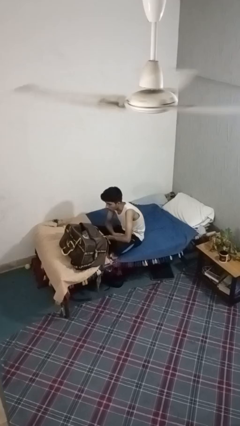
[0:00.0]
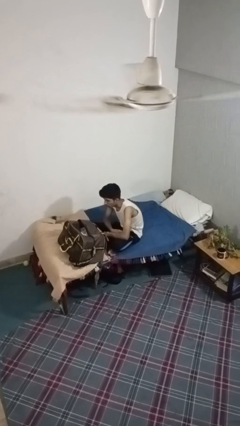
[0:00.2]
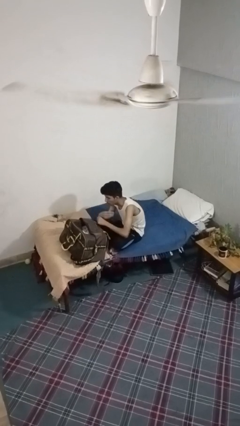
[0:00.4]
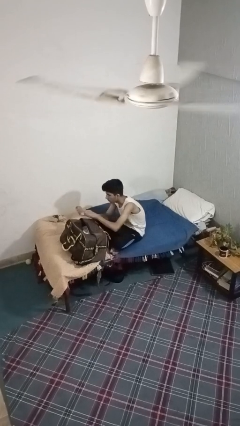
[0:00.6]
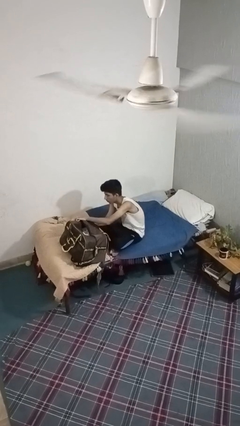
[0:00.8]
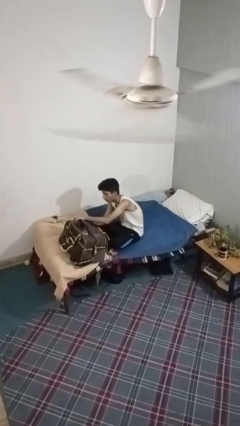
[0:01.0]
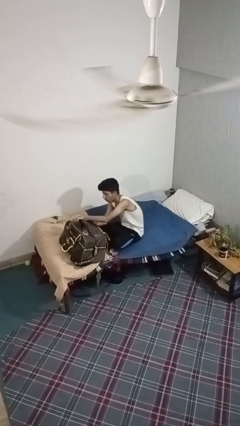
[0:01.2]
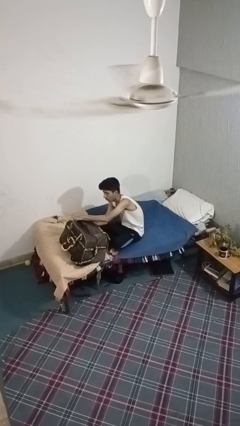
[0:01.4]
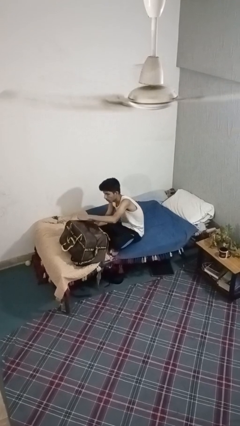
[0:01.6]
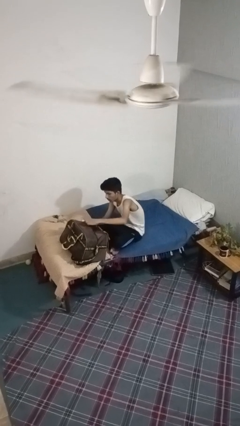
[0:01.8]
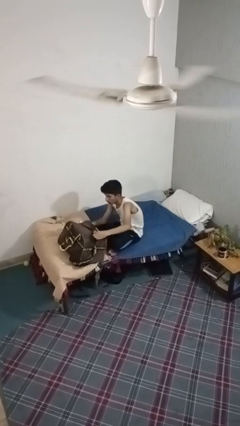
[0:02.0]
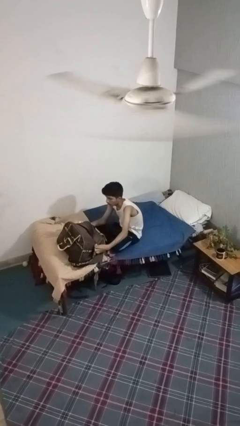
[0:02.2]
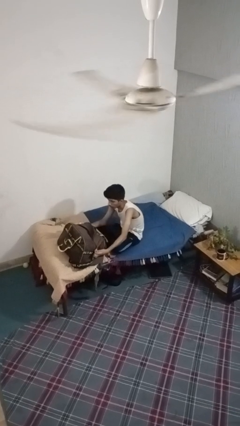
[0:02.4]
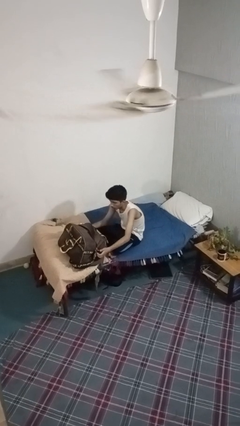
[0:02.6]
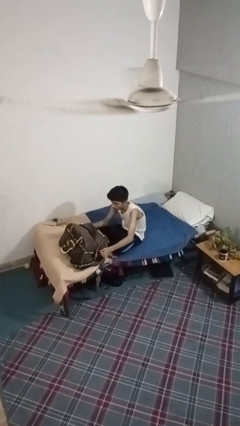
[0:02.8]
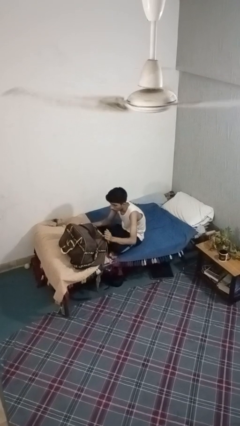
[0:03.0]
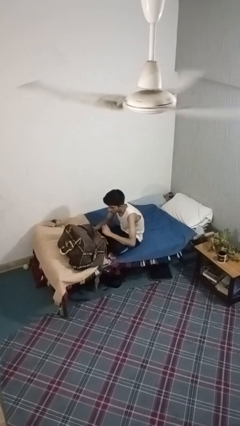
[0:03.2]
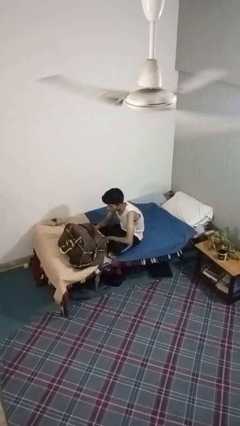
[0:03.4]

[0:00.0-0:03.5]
person closes suitcase

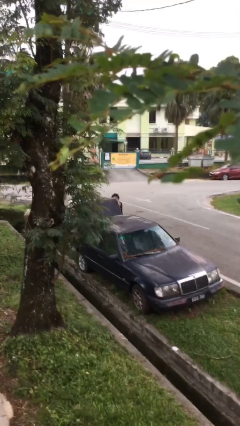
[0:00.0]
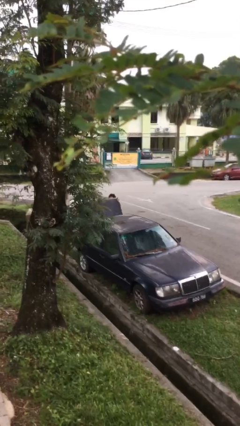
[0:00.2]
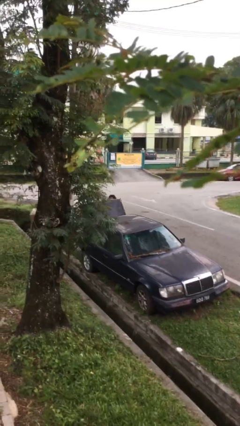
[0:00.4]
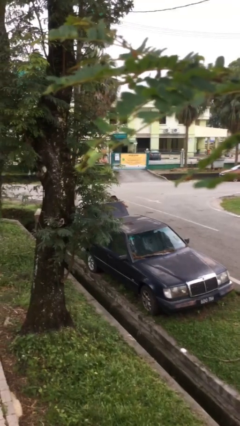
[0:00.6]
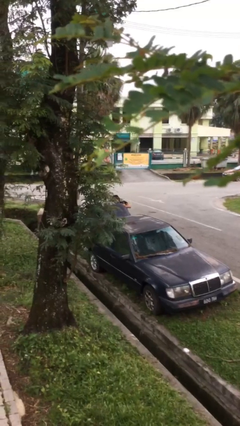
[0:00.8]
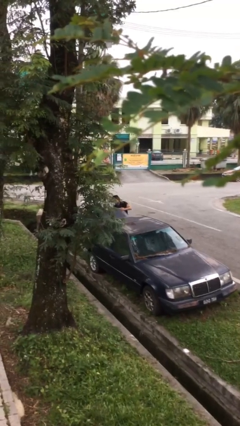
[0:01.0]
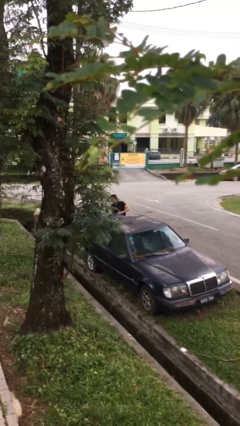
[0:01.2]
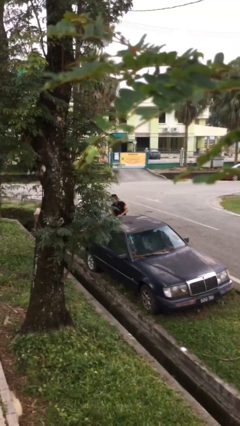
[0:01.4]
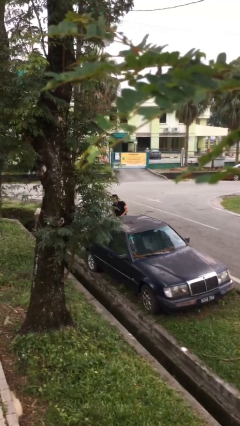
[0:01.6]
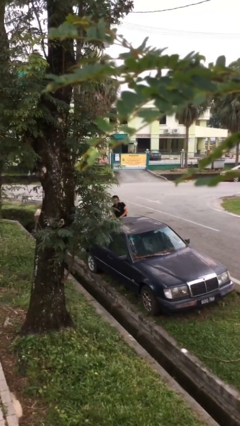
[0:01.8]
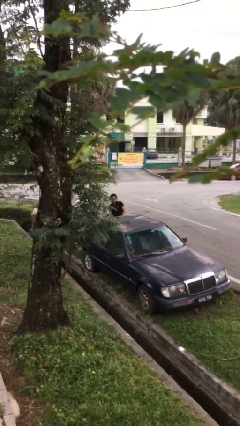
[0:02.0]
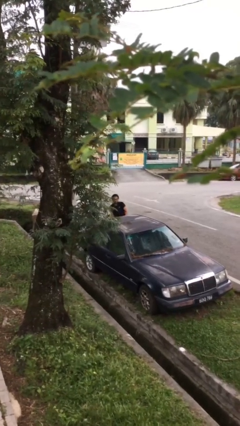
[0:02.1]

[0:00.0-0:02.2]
person closes car trunk

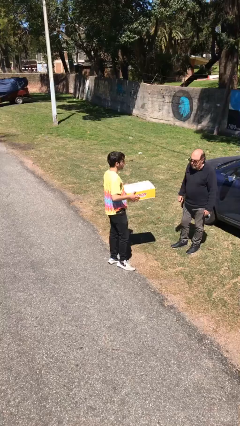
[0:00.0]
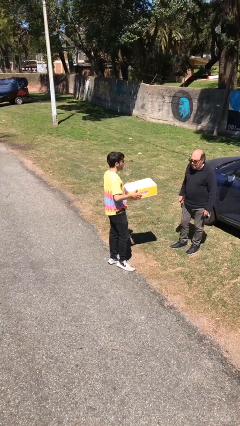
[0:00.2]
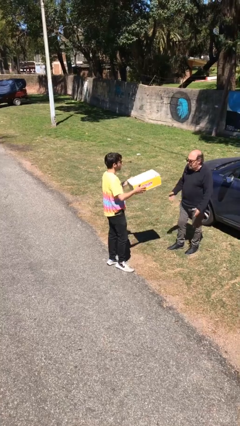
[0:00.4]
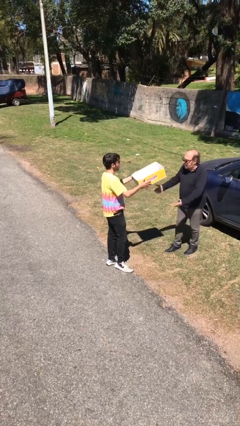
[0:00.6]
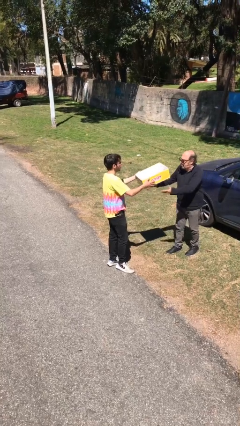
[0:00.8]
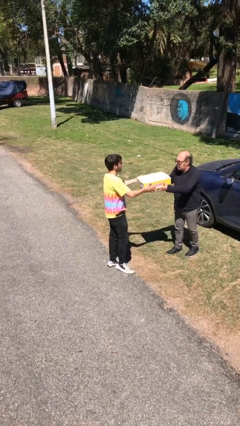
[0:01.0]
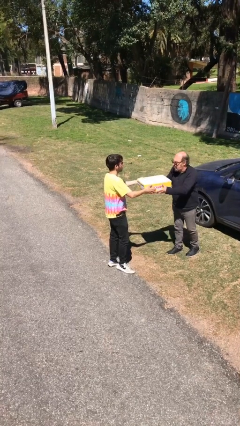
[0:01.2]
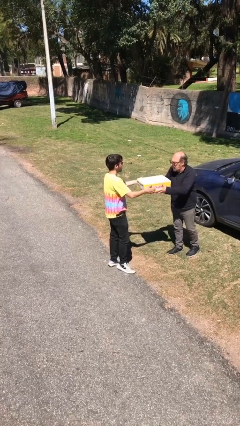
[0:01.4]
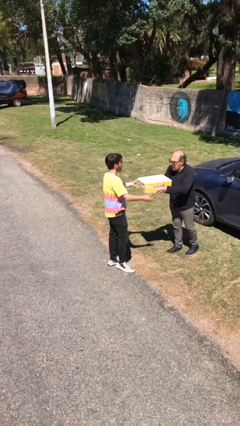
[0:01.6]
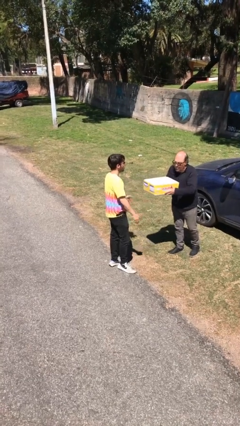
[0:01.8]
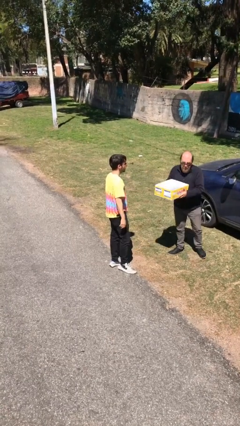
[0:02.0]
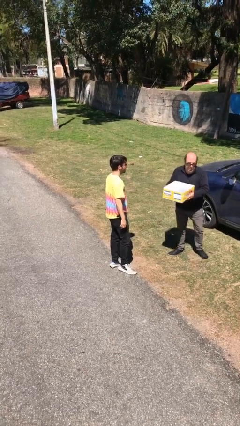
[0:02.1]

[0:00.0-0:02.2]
person transfers object to person

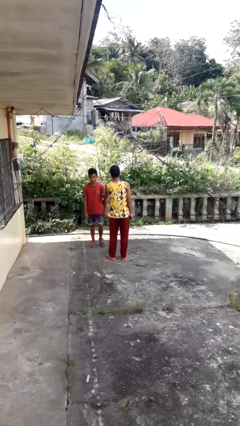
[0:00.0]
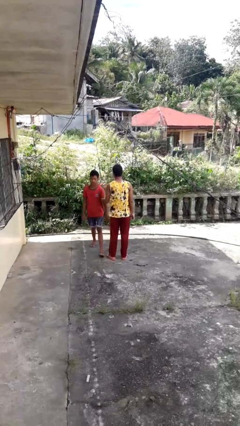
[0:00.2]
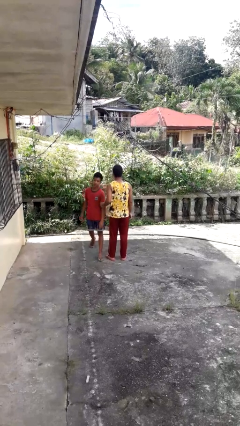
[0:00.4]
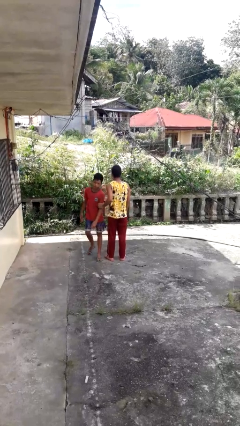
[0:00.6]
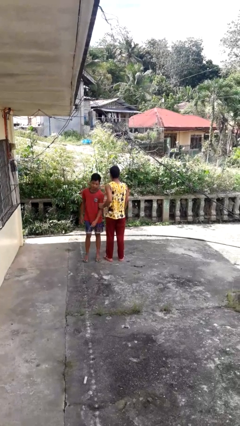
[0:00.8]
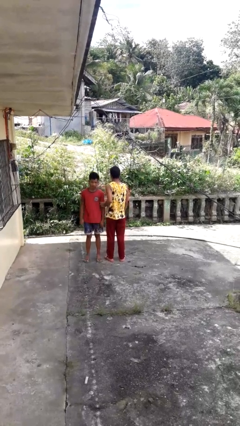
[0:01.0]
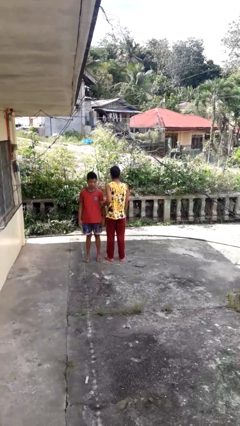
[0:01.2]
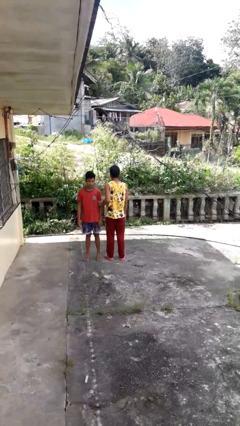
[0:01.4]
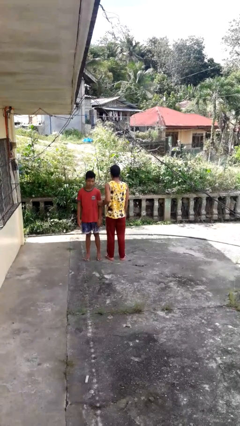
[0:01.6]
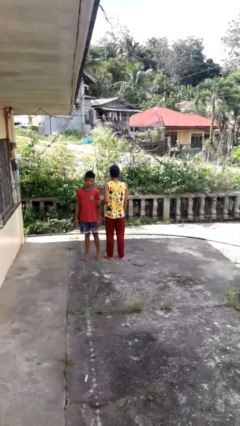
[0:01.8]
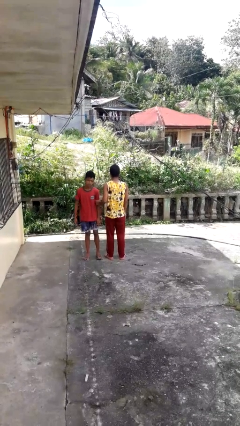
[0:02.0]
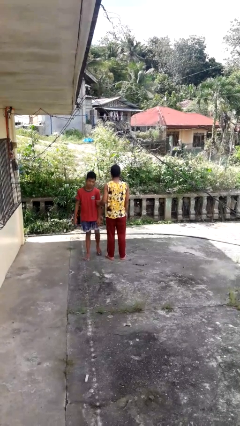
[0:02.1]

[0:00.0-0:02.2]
person grabs person by bicep

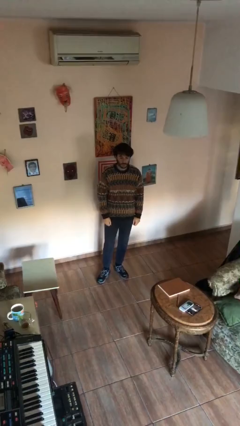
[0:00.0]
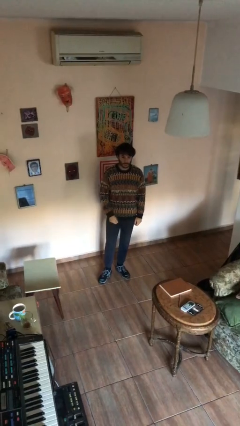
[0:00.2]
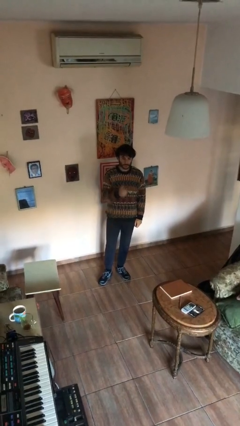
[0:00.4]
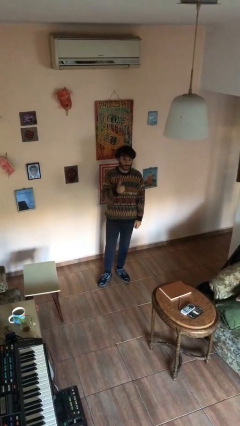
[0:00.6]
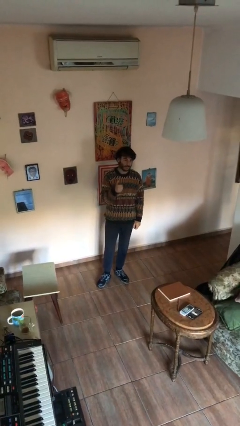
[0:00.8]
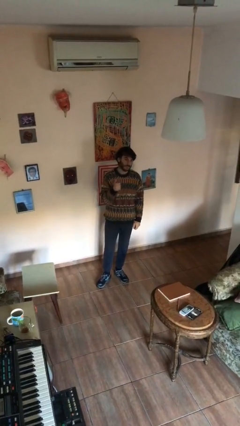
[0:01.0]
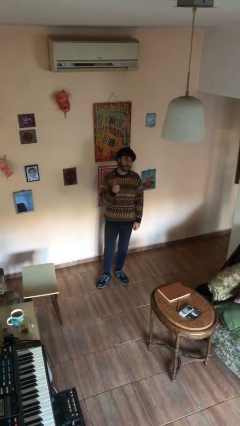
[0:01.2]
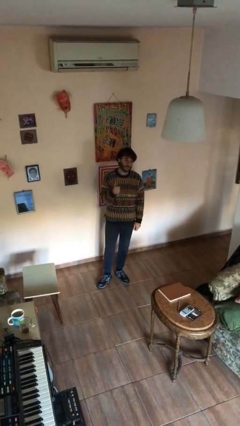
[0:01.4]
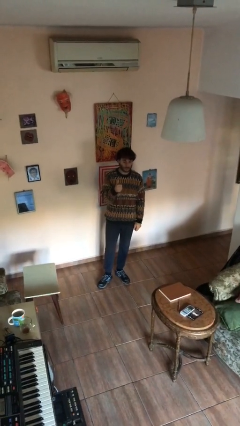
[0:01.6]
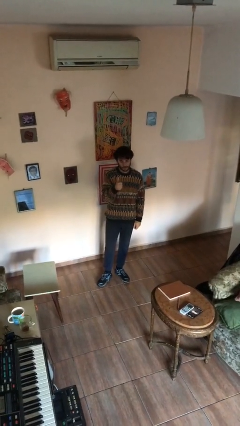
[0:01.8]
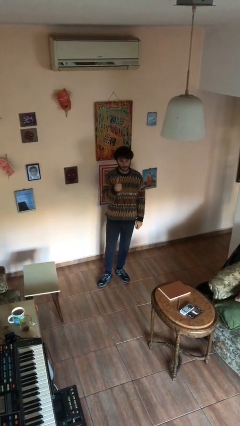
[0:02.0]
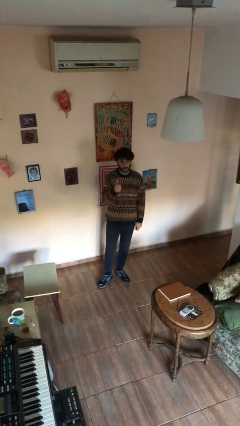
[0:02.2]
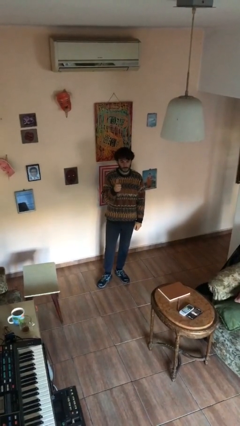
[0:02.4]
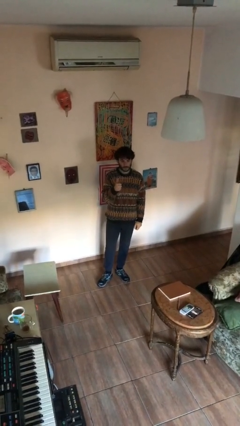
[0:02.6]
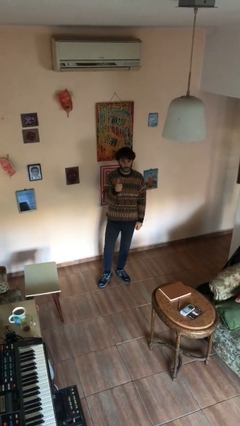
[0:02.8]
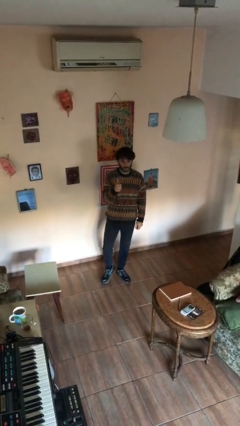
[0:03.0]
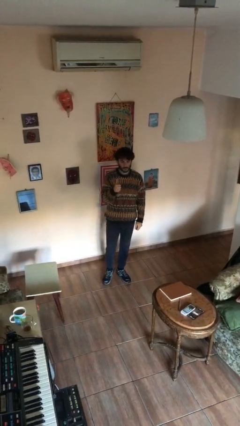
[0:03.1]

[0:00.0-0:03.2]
person gestures thumbs up

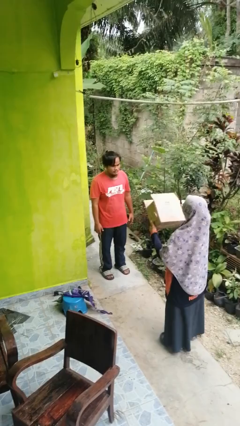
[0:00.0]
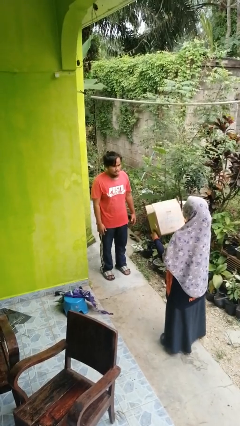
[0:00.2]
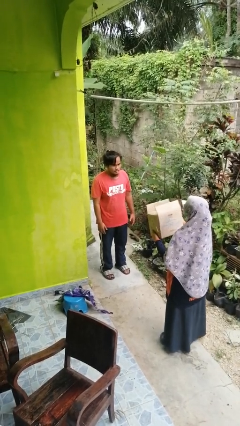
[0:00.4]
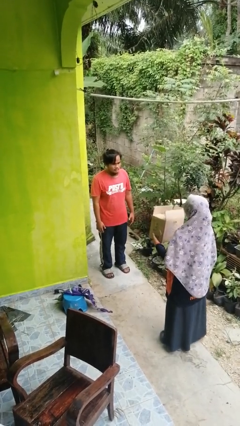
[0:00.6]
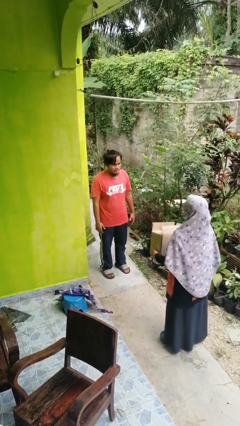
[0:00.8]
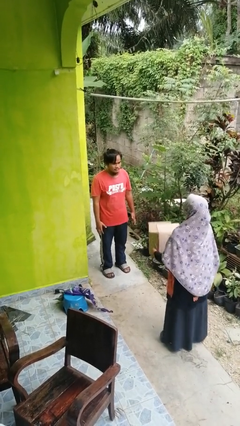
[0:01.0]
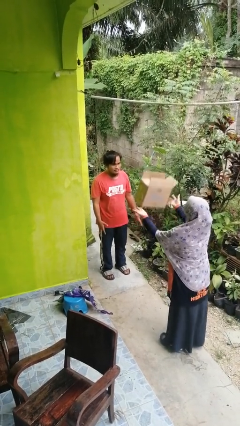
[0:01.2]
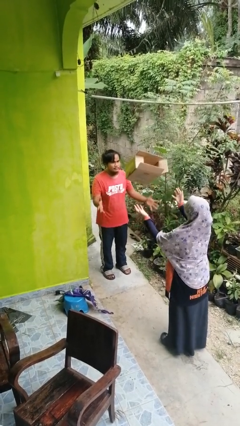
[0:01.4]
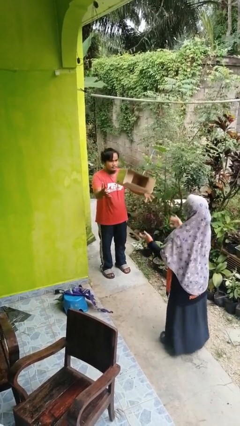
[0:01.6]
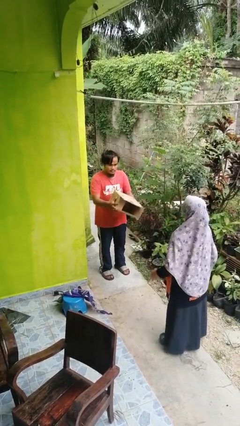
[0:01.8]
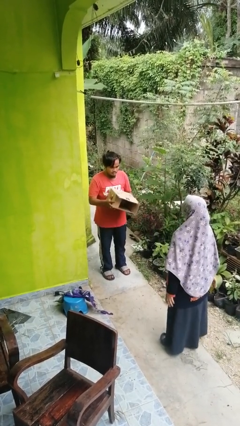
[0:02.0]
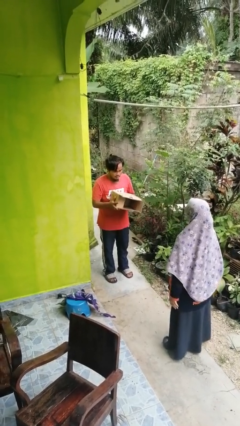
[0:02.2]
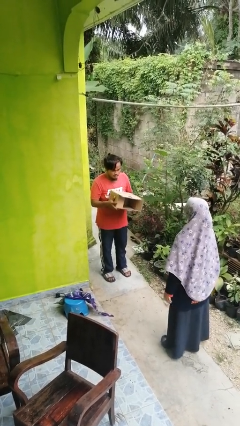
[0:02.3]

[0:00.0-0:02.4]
person catches object from person

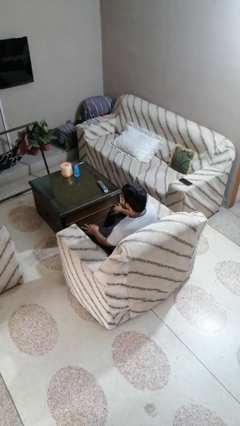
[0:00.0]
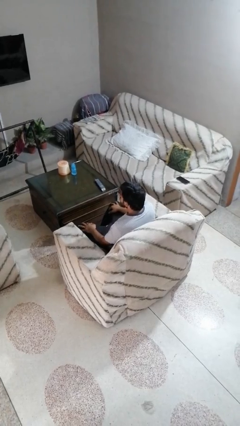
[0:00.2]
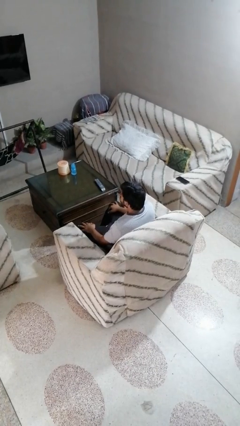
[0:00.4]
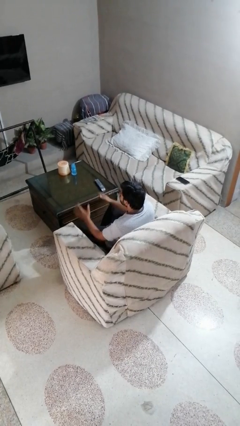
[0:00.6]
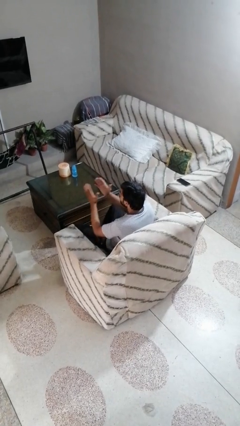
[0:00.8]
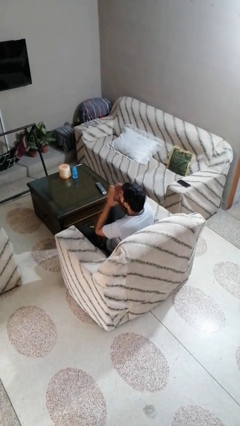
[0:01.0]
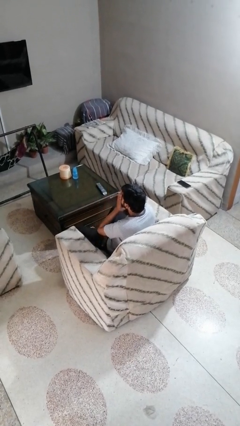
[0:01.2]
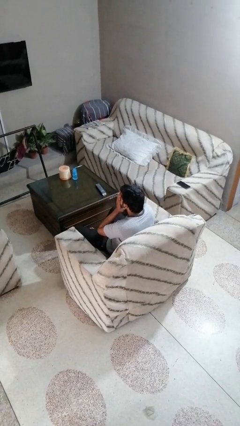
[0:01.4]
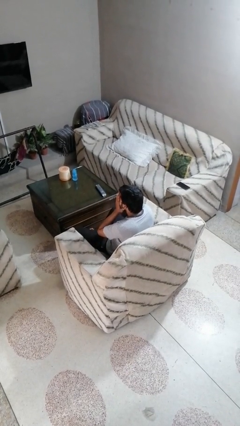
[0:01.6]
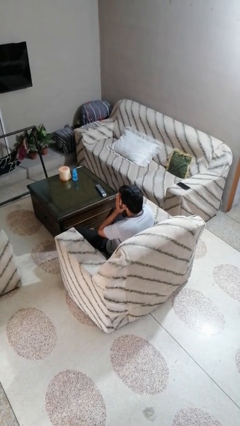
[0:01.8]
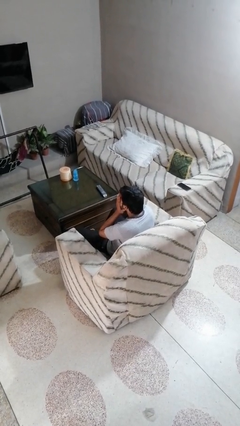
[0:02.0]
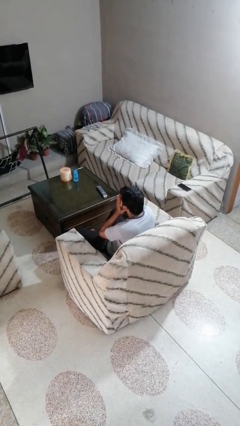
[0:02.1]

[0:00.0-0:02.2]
person covers face with hands
